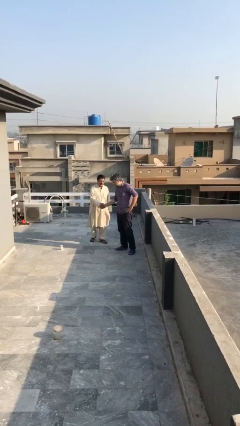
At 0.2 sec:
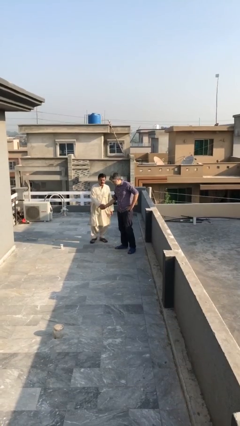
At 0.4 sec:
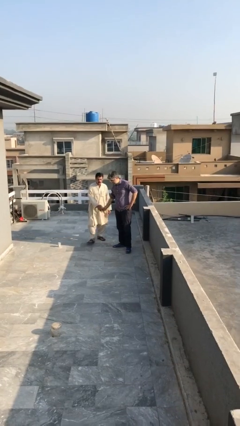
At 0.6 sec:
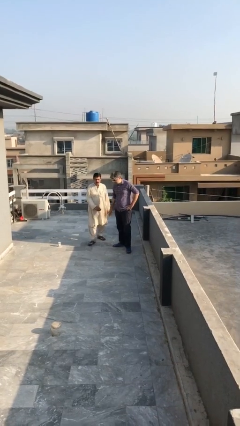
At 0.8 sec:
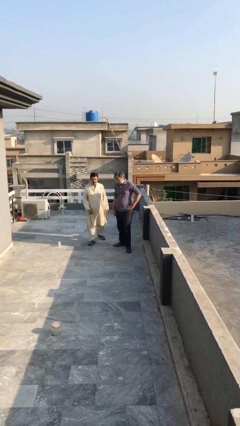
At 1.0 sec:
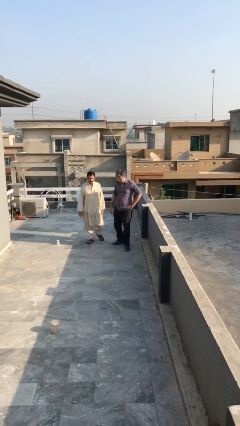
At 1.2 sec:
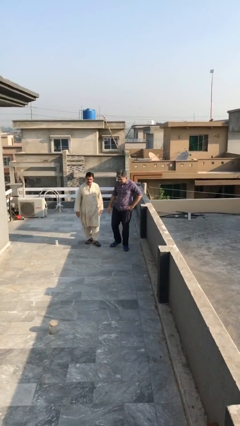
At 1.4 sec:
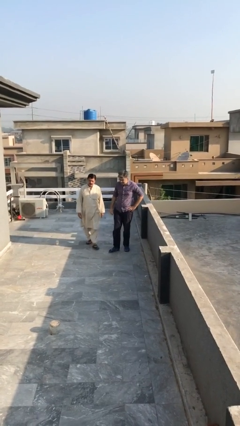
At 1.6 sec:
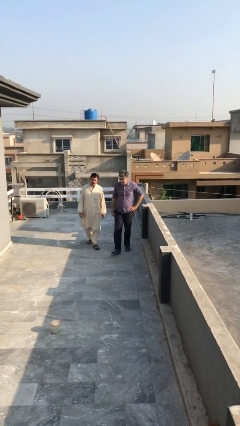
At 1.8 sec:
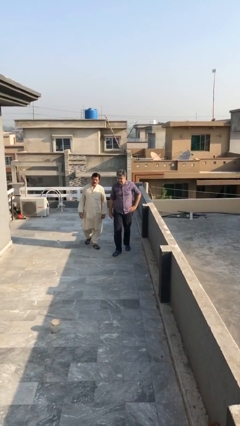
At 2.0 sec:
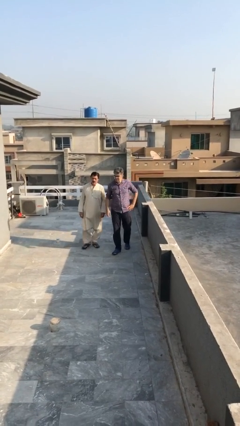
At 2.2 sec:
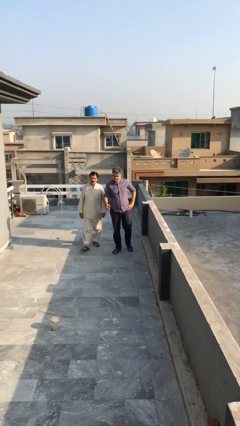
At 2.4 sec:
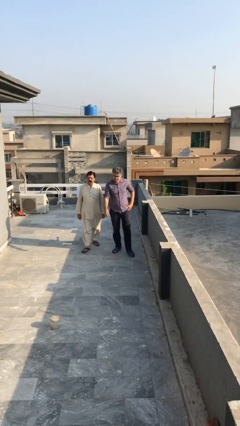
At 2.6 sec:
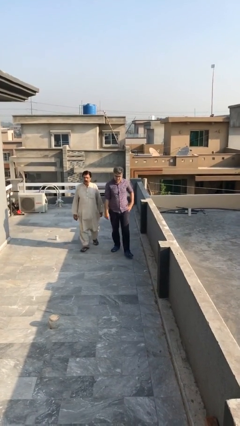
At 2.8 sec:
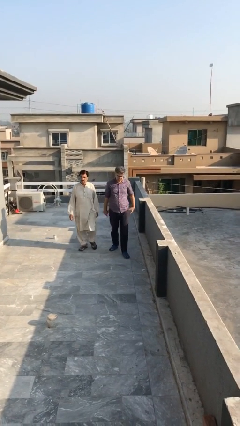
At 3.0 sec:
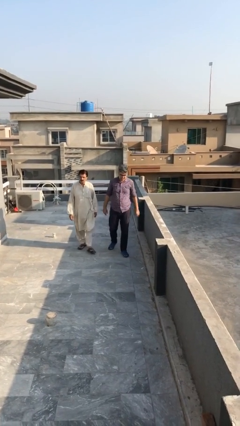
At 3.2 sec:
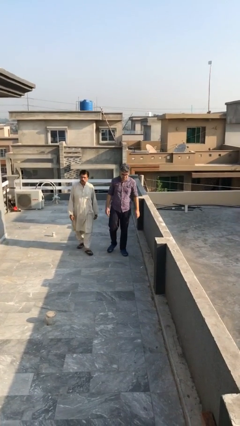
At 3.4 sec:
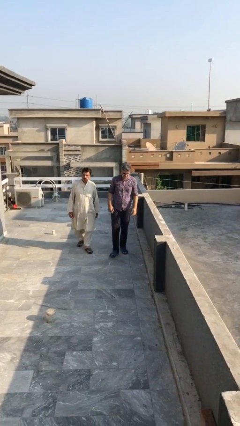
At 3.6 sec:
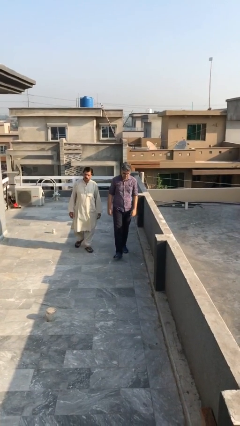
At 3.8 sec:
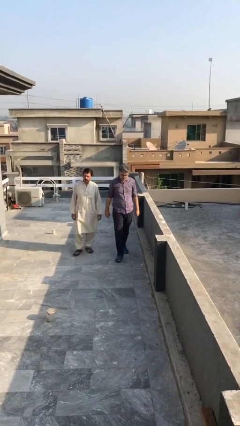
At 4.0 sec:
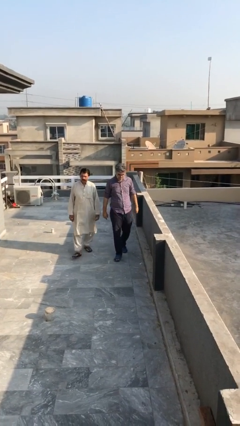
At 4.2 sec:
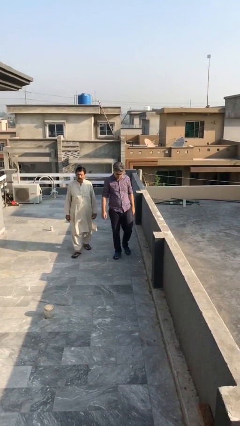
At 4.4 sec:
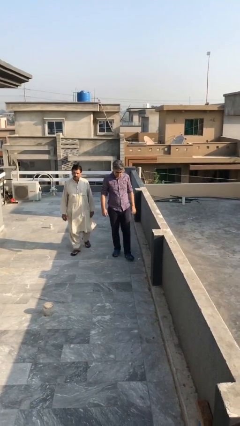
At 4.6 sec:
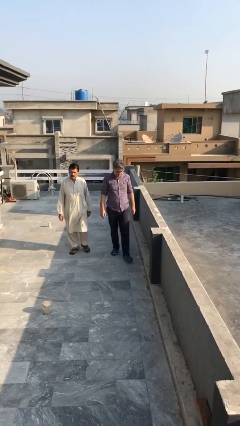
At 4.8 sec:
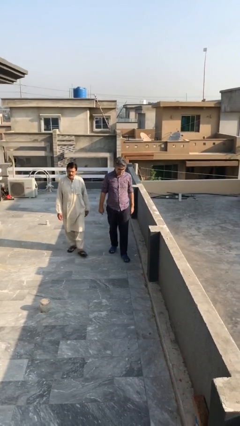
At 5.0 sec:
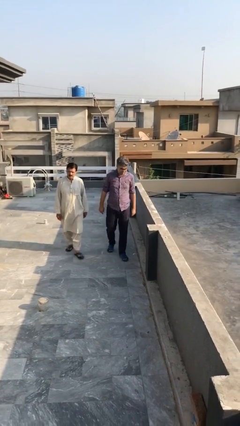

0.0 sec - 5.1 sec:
person talks to person

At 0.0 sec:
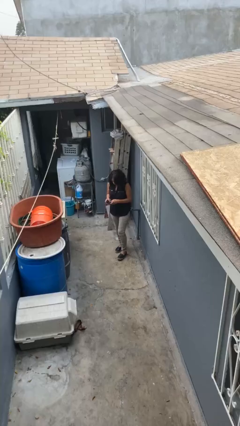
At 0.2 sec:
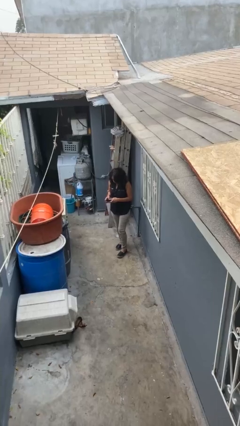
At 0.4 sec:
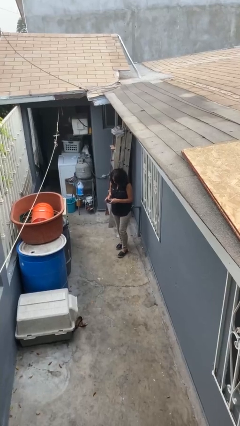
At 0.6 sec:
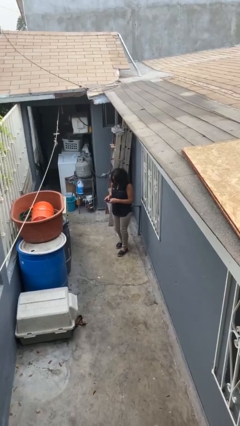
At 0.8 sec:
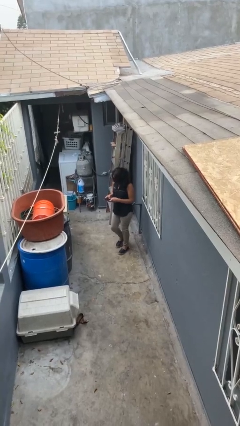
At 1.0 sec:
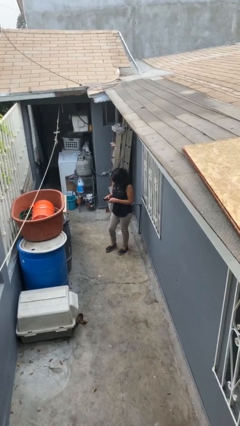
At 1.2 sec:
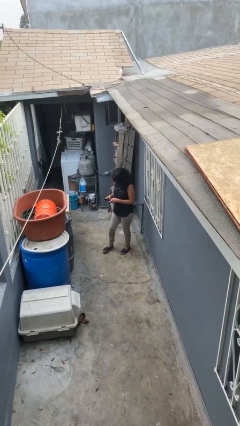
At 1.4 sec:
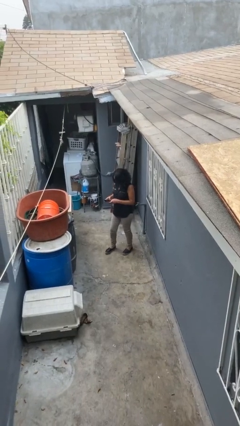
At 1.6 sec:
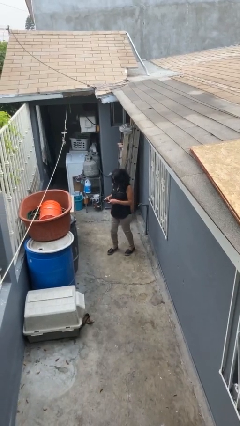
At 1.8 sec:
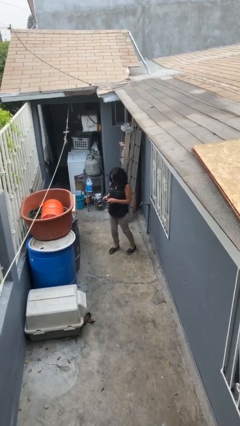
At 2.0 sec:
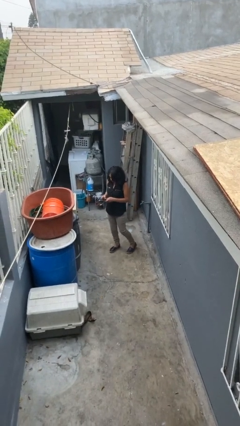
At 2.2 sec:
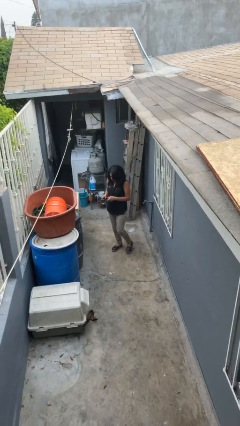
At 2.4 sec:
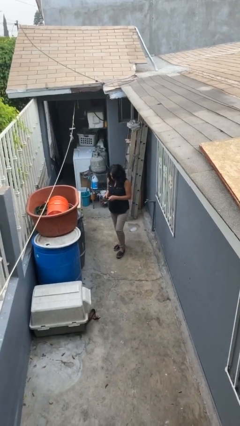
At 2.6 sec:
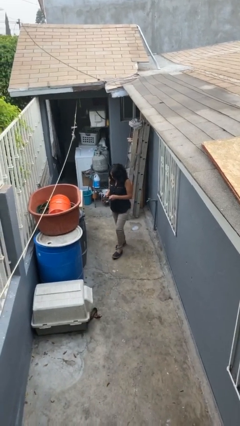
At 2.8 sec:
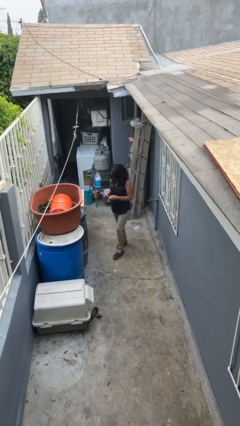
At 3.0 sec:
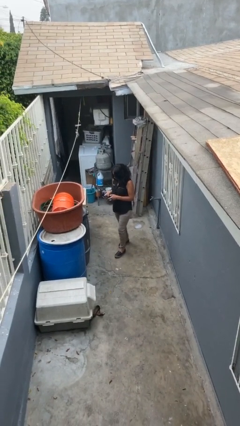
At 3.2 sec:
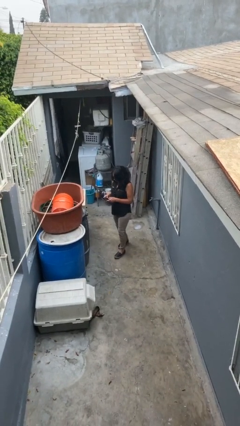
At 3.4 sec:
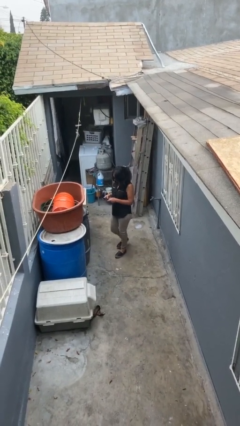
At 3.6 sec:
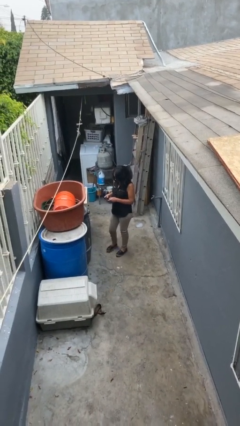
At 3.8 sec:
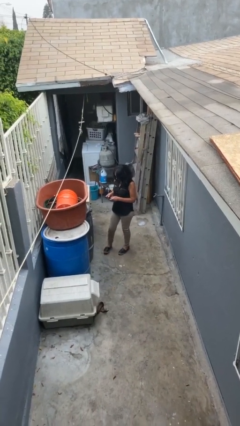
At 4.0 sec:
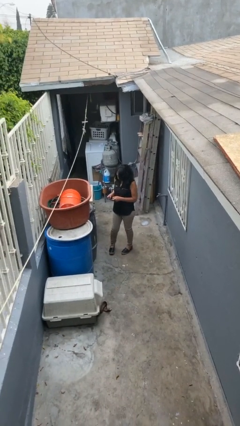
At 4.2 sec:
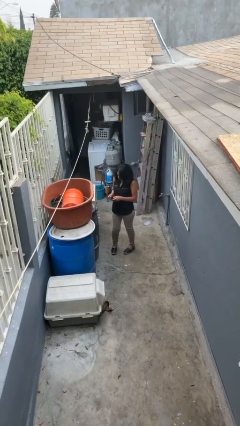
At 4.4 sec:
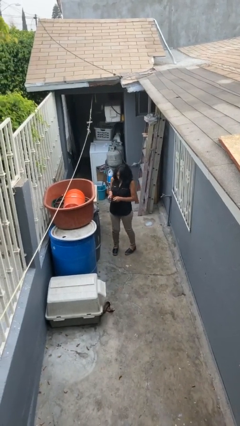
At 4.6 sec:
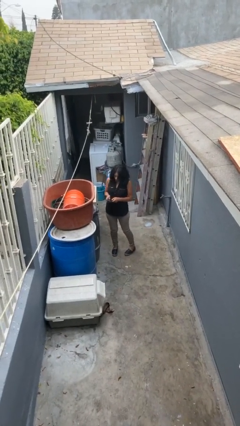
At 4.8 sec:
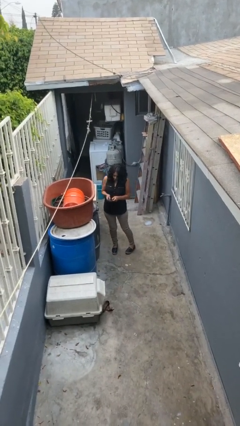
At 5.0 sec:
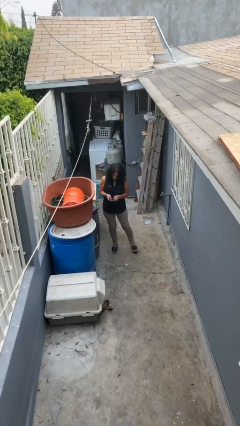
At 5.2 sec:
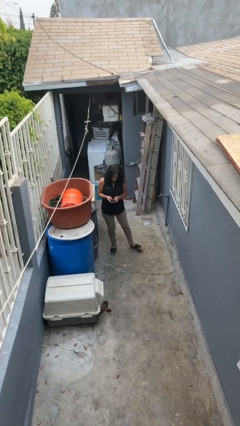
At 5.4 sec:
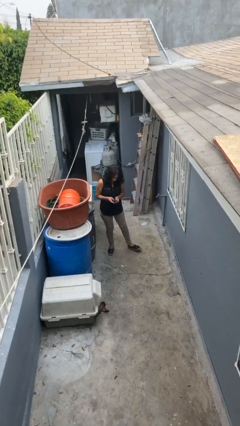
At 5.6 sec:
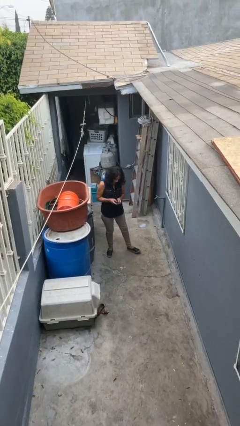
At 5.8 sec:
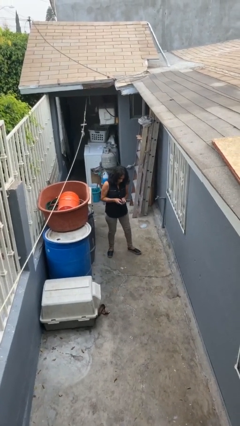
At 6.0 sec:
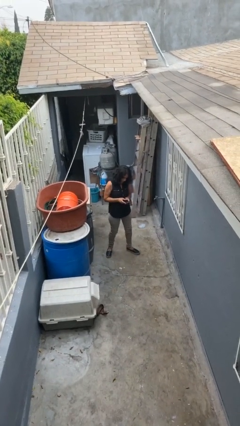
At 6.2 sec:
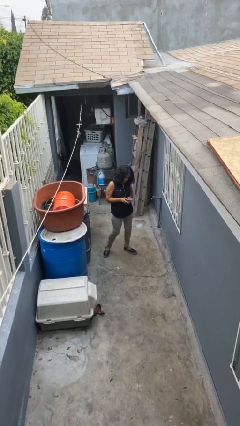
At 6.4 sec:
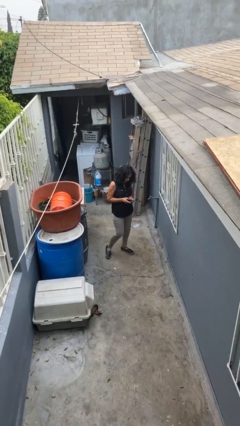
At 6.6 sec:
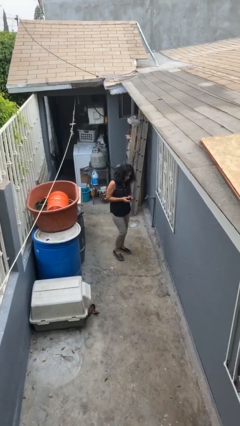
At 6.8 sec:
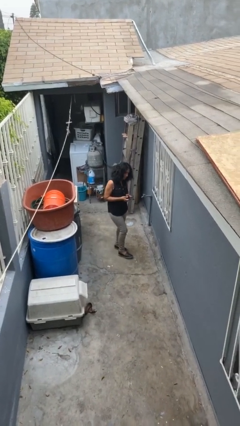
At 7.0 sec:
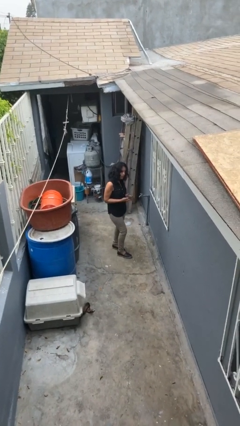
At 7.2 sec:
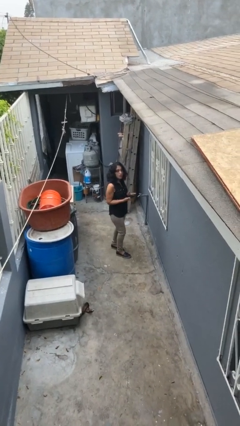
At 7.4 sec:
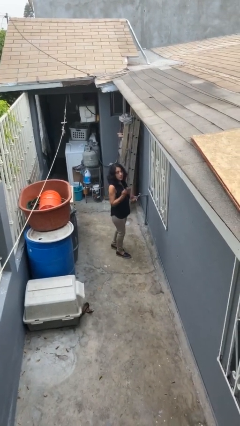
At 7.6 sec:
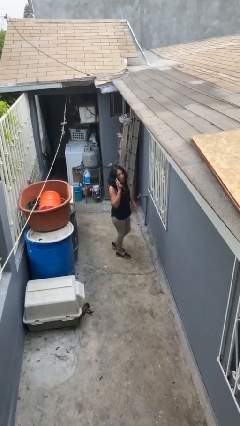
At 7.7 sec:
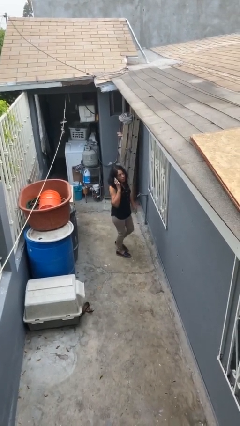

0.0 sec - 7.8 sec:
person texts on phone

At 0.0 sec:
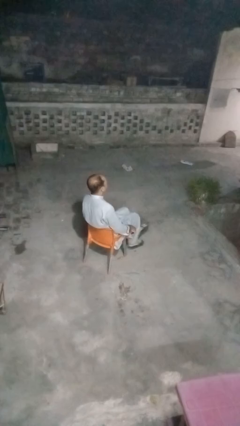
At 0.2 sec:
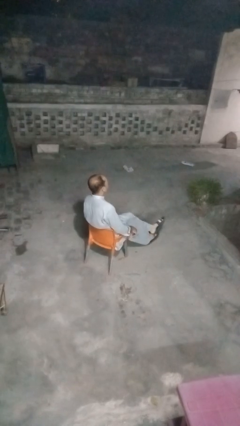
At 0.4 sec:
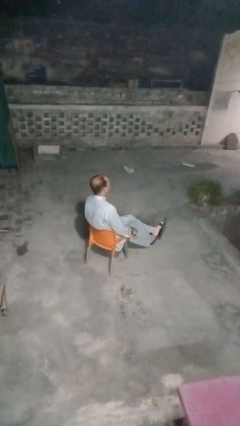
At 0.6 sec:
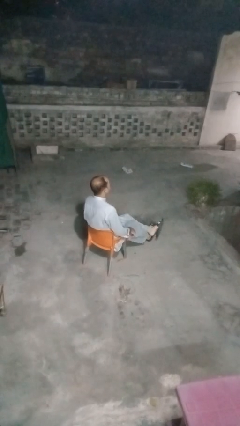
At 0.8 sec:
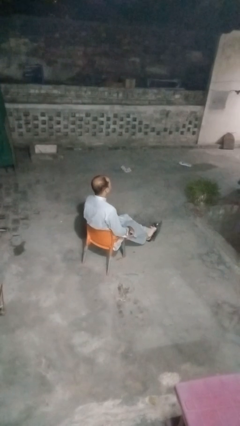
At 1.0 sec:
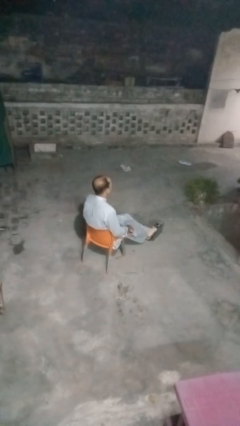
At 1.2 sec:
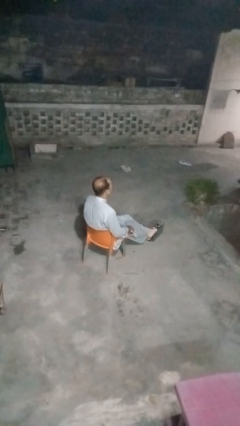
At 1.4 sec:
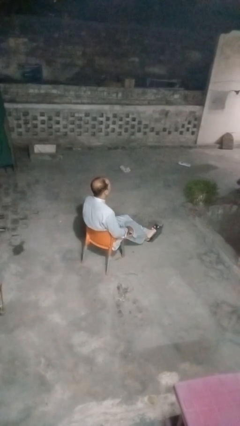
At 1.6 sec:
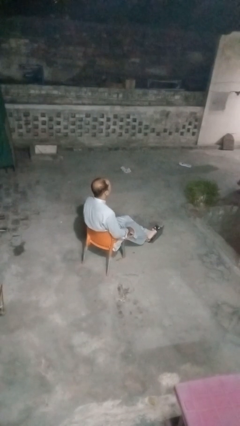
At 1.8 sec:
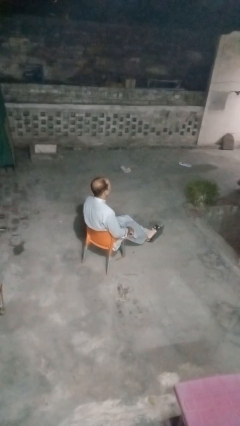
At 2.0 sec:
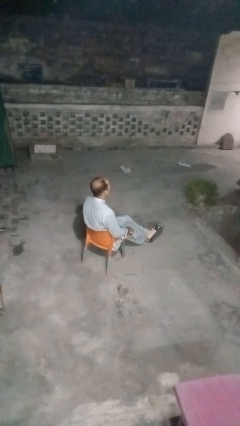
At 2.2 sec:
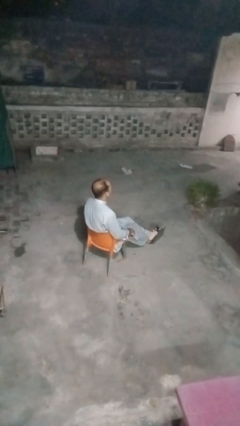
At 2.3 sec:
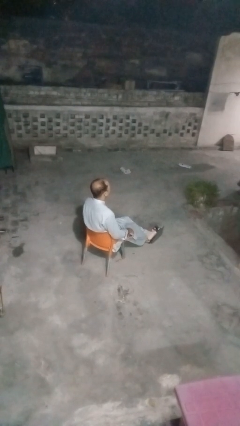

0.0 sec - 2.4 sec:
person crosses legs

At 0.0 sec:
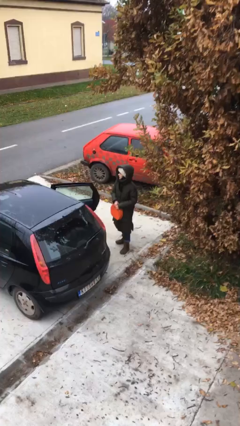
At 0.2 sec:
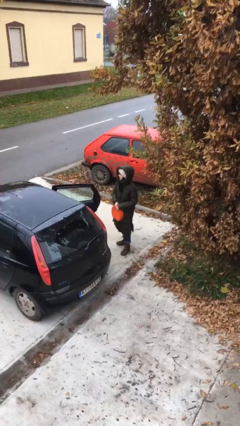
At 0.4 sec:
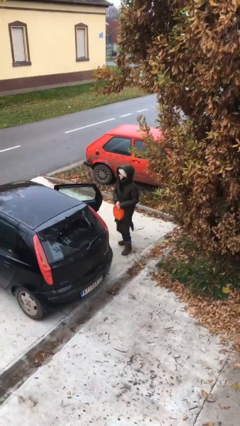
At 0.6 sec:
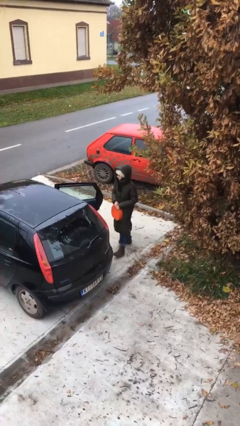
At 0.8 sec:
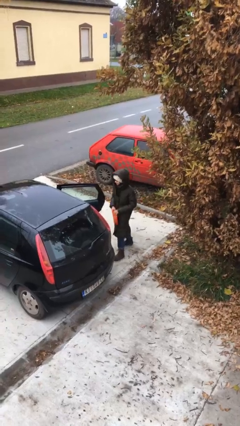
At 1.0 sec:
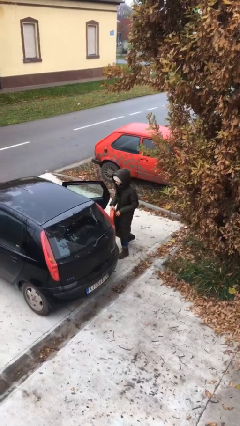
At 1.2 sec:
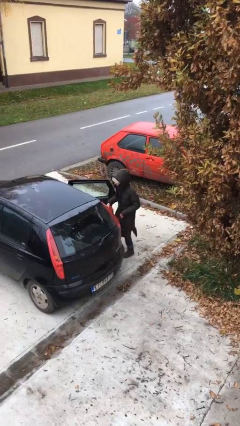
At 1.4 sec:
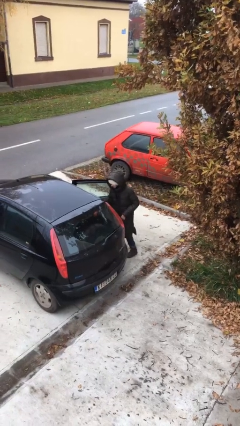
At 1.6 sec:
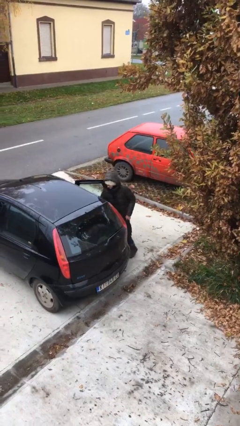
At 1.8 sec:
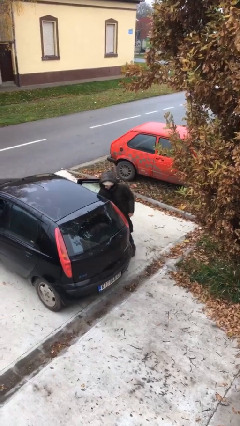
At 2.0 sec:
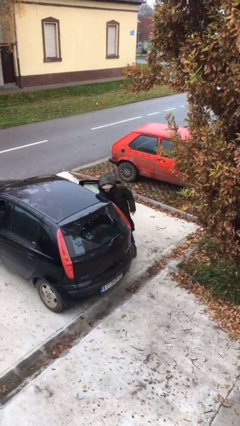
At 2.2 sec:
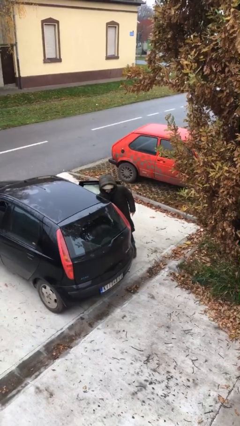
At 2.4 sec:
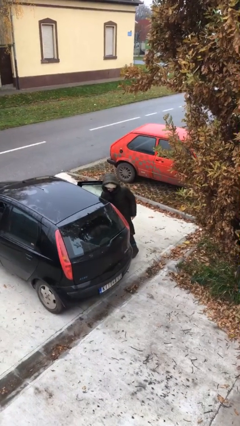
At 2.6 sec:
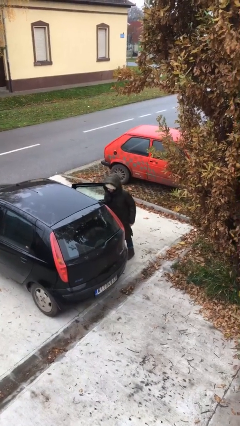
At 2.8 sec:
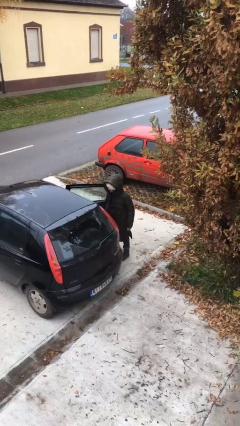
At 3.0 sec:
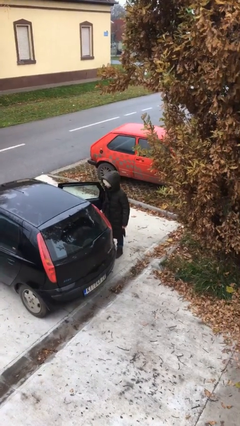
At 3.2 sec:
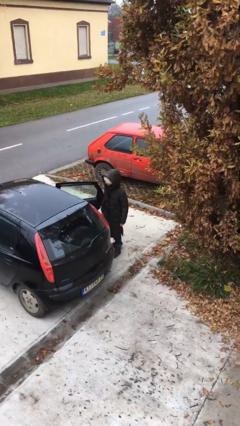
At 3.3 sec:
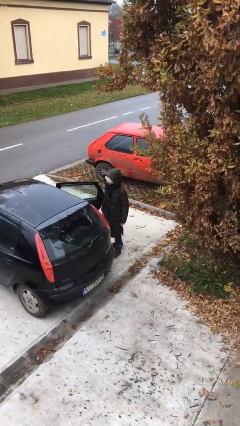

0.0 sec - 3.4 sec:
person loads car
